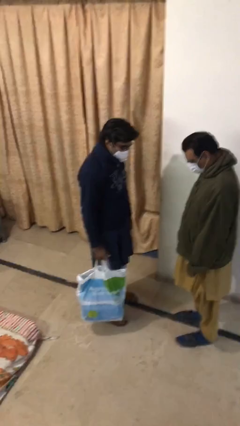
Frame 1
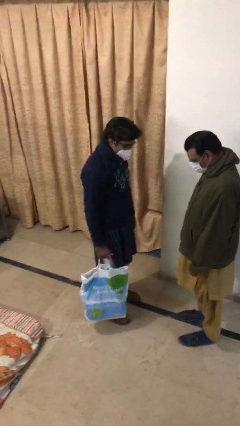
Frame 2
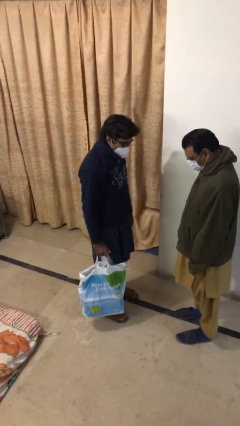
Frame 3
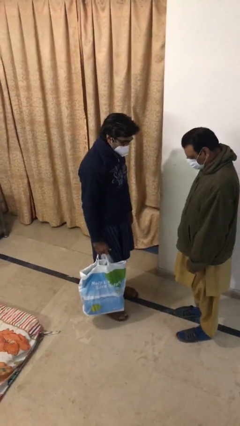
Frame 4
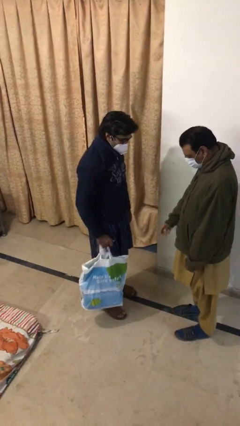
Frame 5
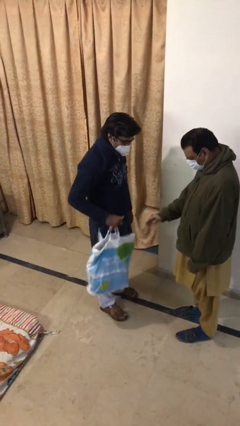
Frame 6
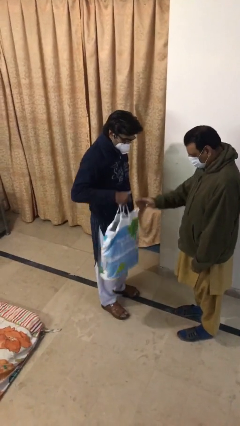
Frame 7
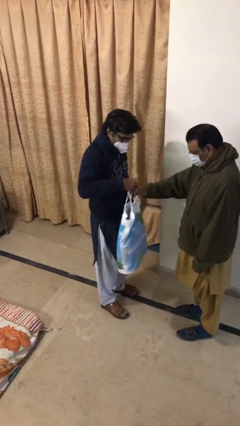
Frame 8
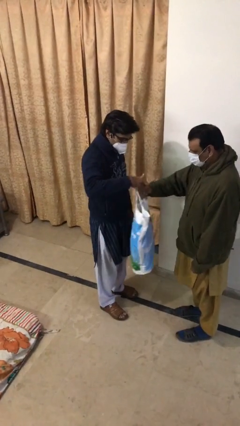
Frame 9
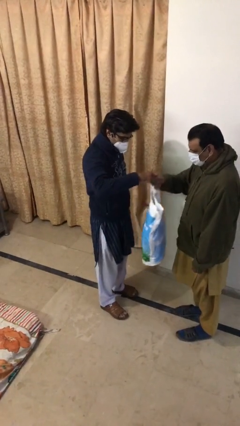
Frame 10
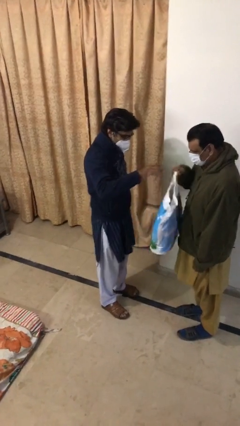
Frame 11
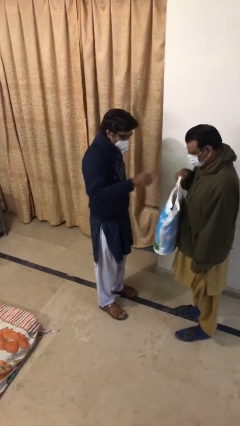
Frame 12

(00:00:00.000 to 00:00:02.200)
person transfers object to person

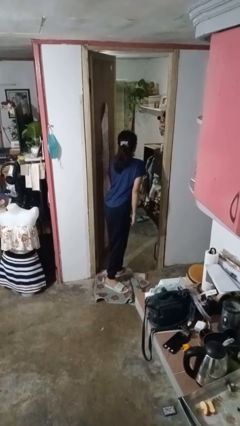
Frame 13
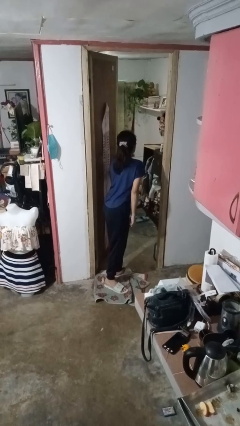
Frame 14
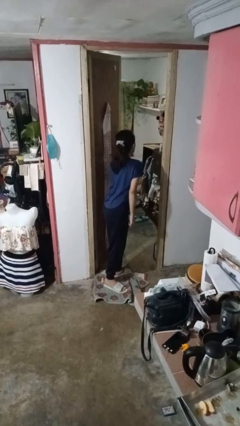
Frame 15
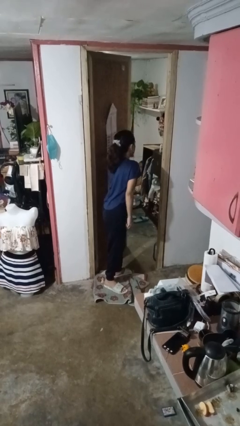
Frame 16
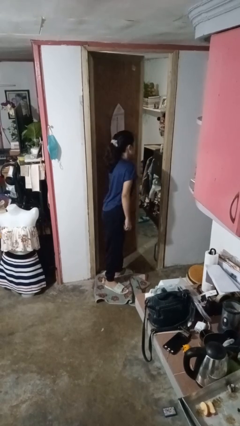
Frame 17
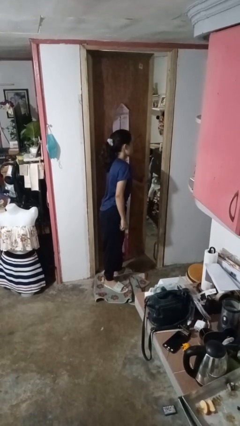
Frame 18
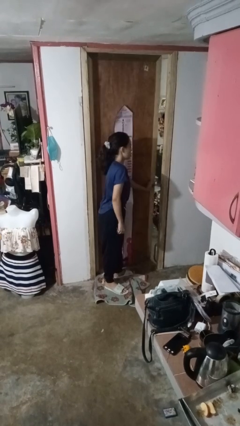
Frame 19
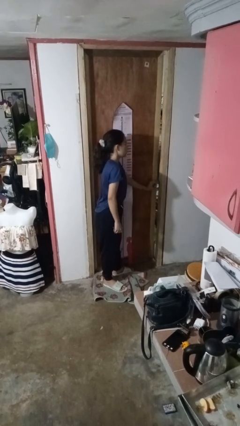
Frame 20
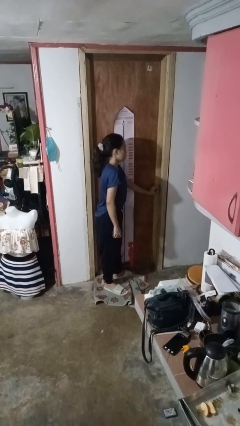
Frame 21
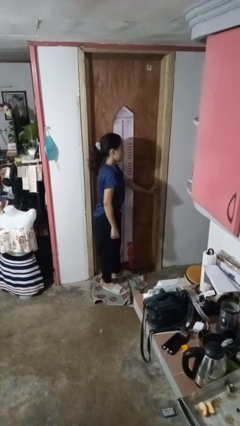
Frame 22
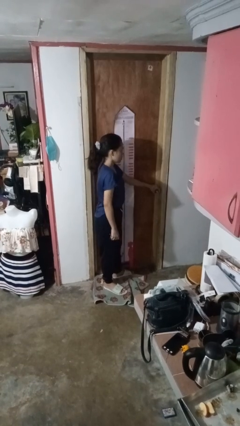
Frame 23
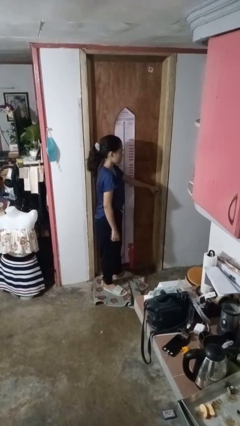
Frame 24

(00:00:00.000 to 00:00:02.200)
person closes facility door

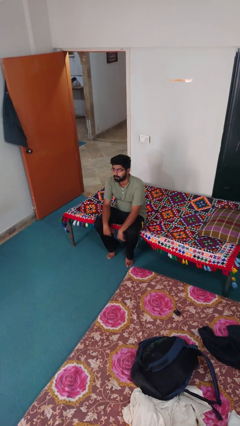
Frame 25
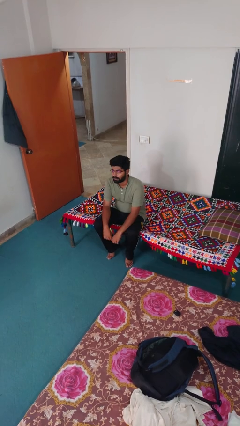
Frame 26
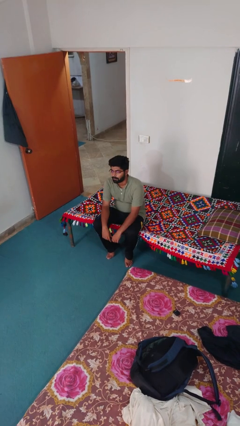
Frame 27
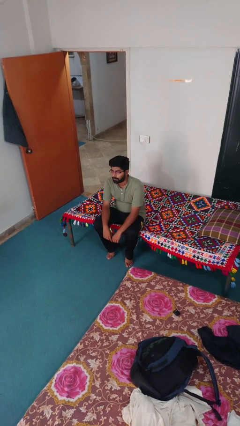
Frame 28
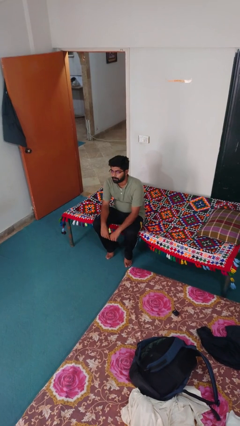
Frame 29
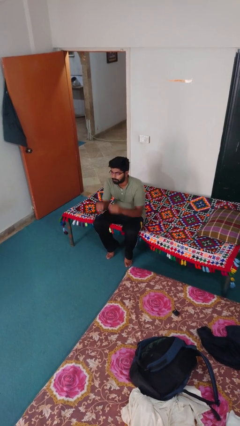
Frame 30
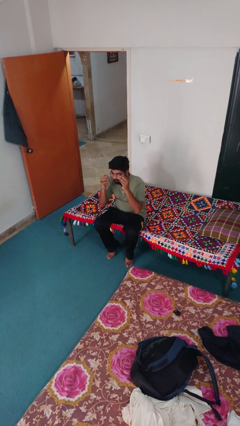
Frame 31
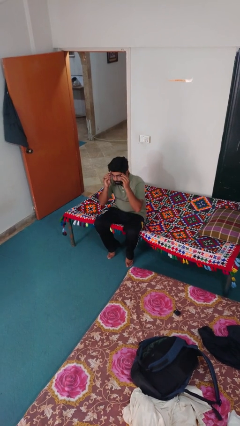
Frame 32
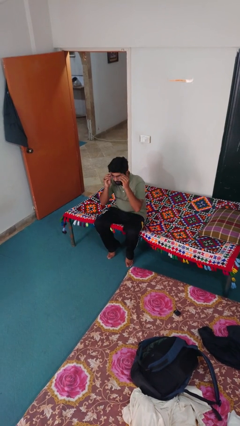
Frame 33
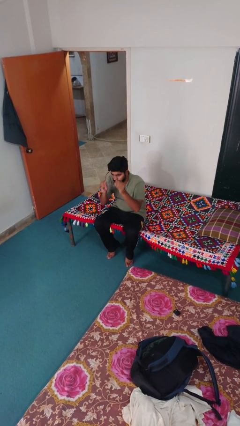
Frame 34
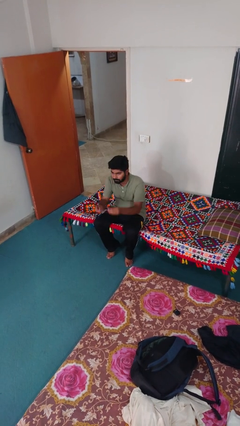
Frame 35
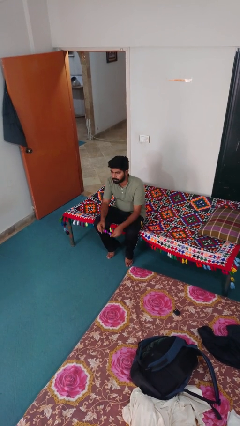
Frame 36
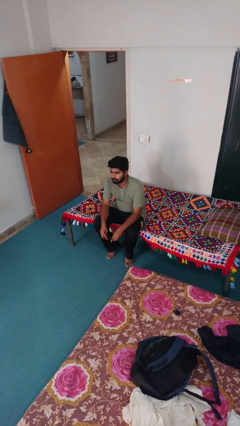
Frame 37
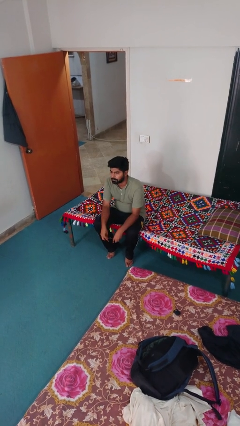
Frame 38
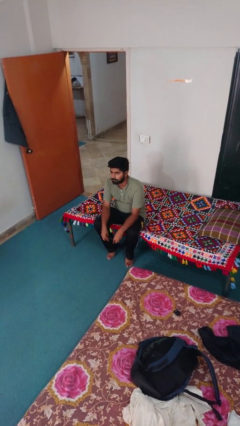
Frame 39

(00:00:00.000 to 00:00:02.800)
person takes off glasses

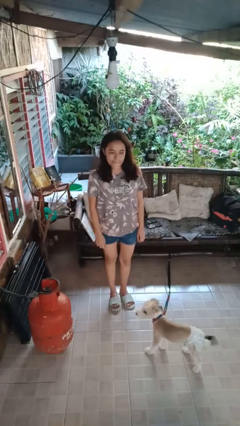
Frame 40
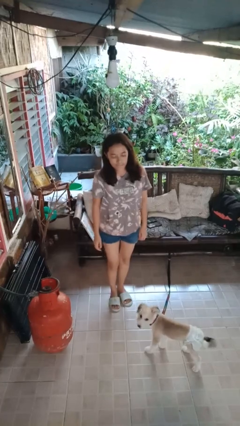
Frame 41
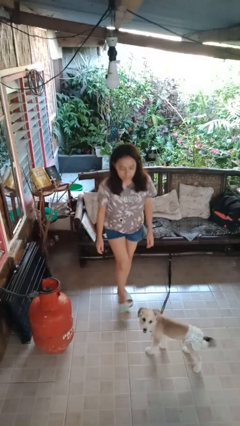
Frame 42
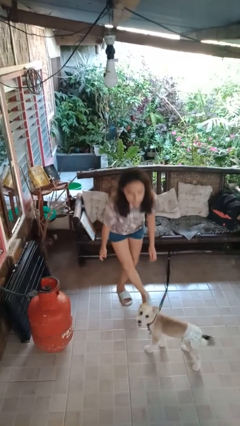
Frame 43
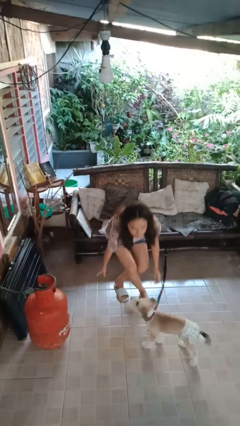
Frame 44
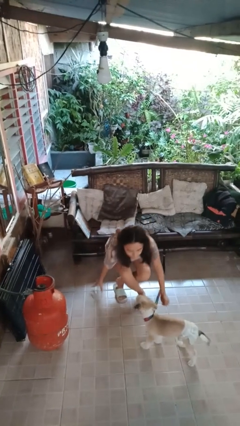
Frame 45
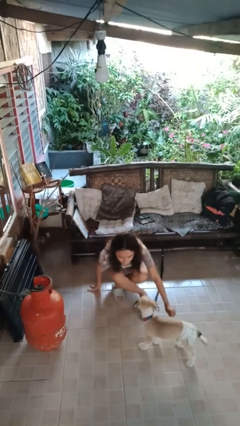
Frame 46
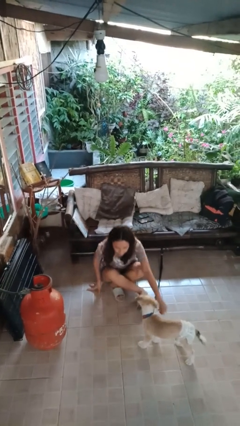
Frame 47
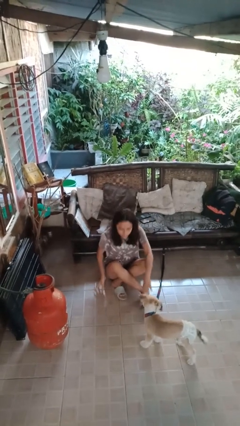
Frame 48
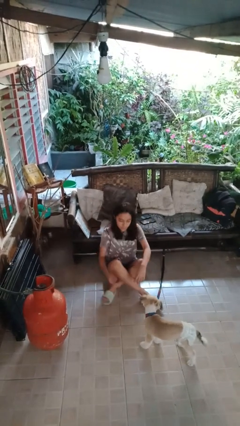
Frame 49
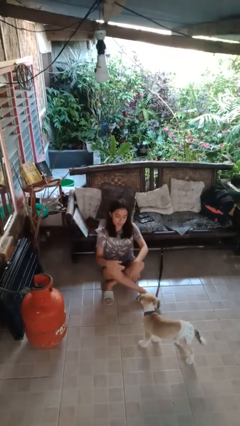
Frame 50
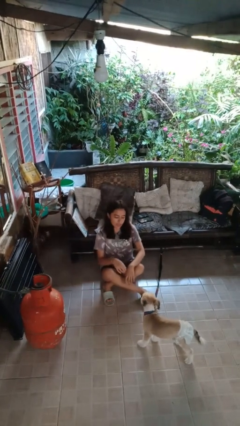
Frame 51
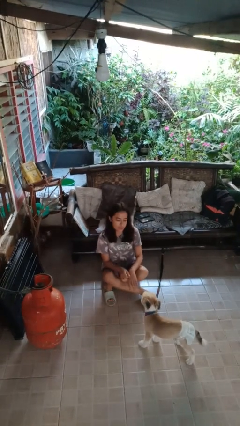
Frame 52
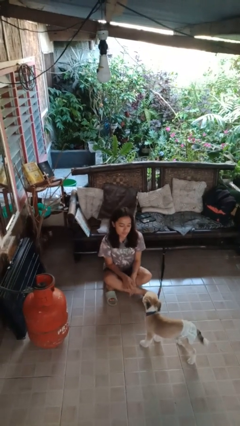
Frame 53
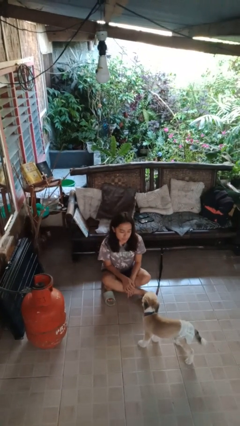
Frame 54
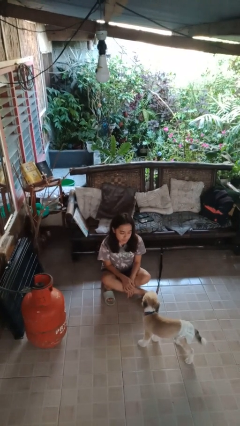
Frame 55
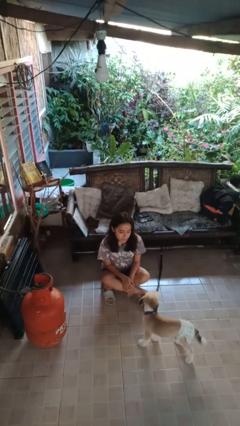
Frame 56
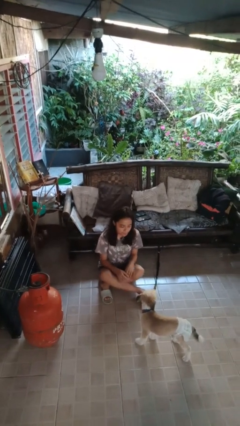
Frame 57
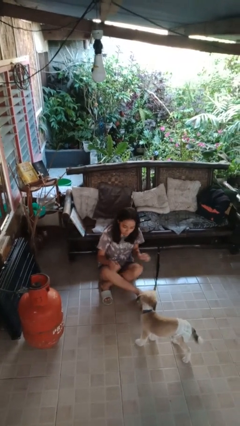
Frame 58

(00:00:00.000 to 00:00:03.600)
person sits crisscross

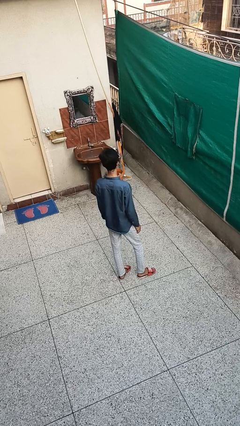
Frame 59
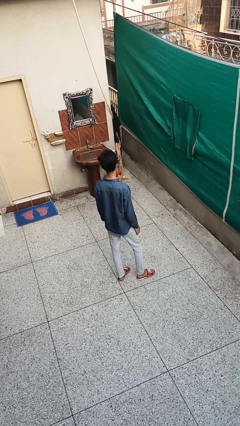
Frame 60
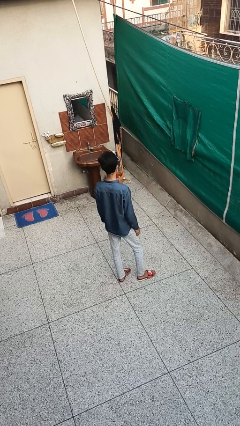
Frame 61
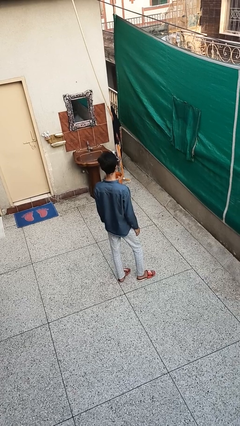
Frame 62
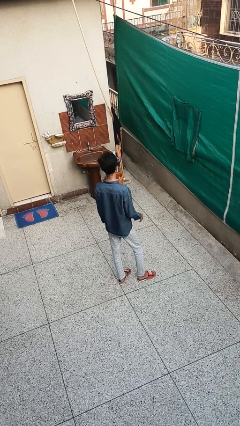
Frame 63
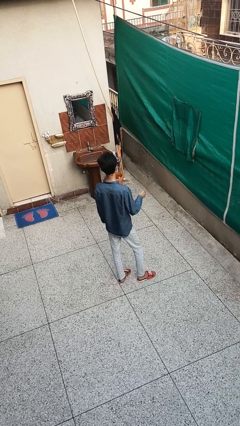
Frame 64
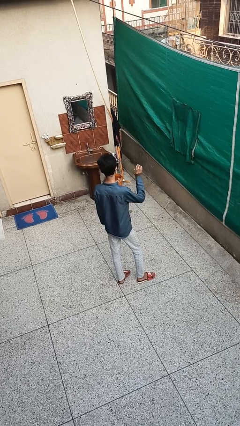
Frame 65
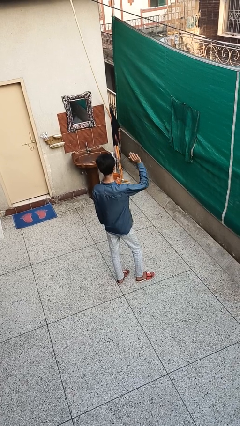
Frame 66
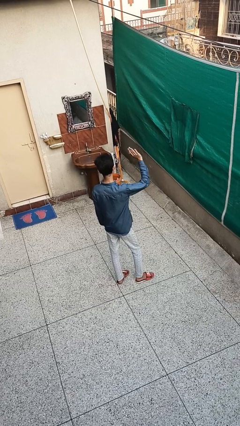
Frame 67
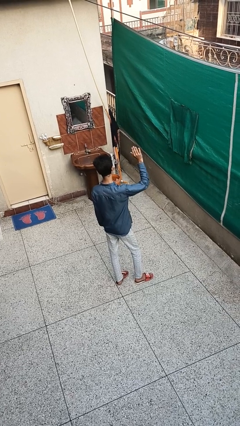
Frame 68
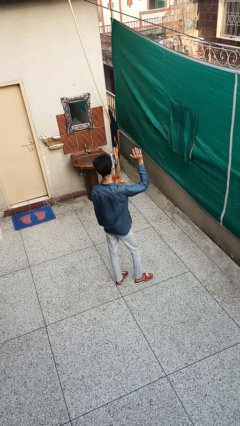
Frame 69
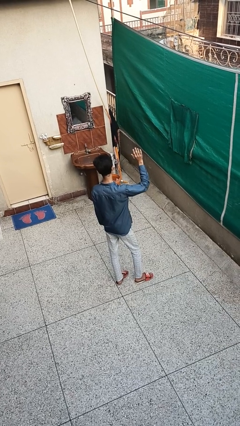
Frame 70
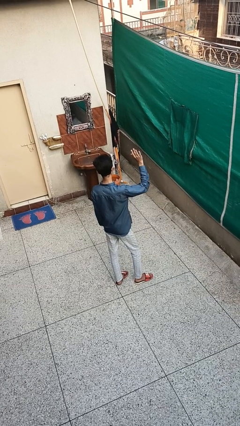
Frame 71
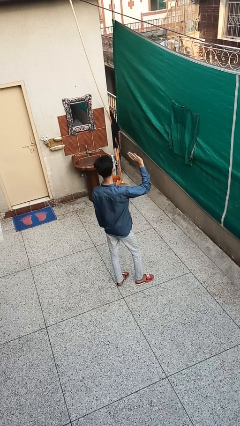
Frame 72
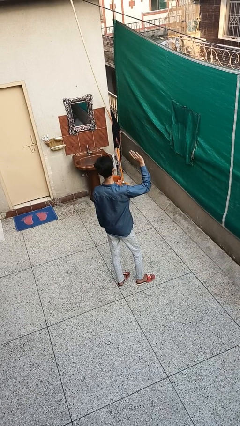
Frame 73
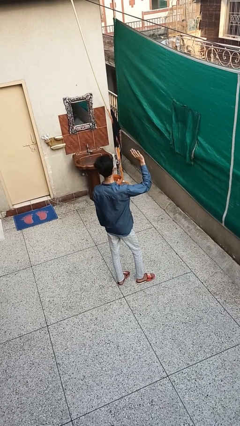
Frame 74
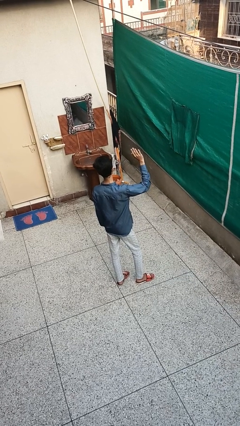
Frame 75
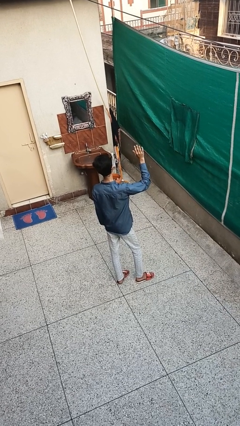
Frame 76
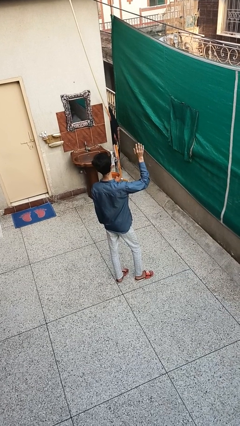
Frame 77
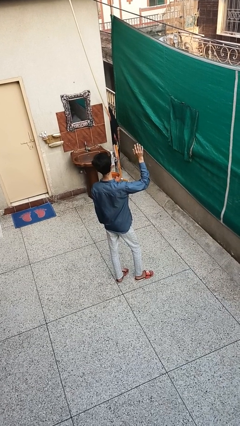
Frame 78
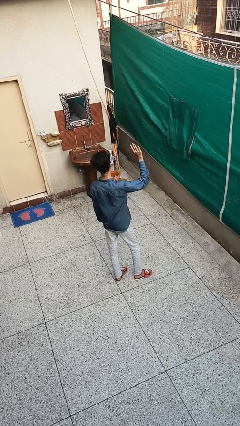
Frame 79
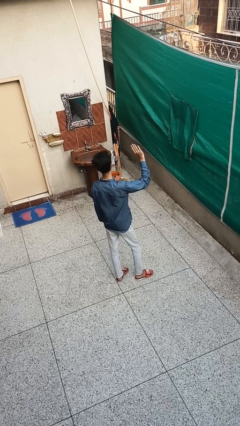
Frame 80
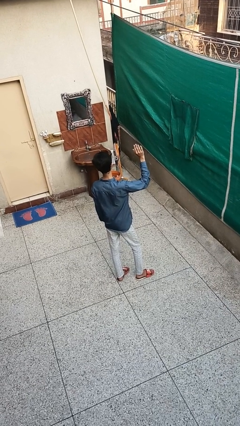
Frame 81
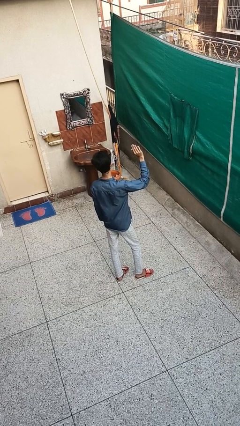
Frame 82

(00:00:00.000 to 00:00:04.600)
person waves at person

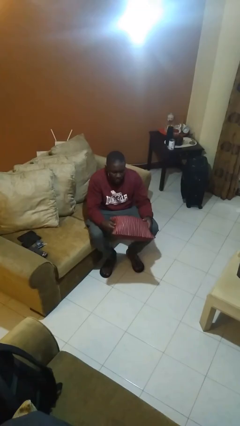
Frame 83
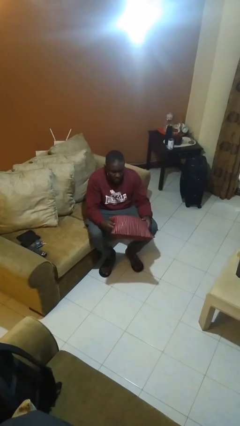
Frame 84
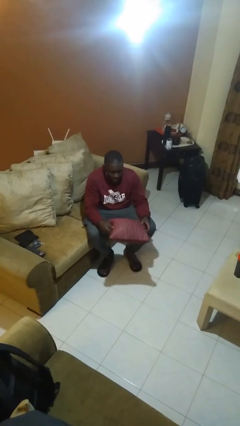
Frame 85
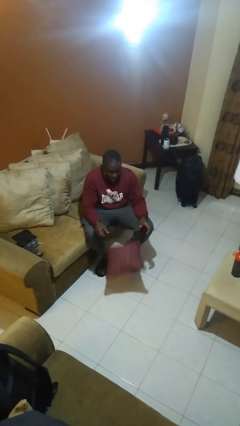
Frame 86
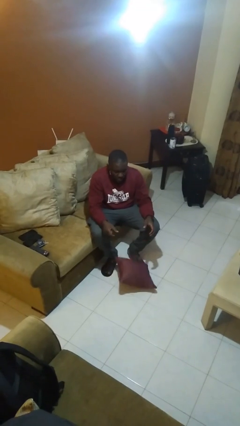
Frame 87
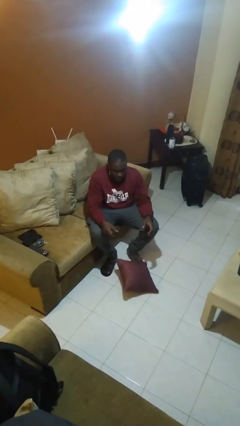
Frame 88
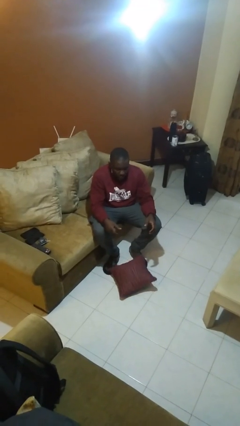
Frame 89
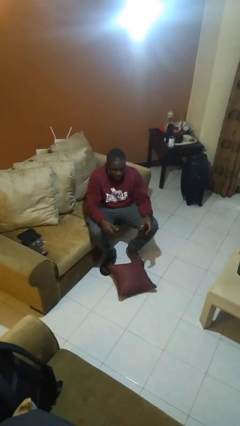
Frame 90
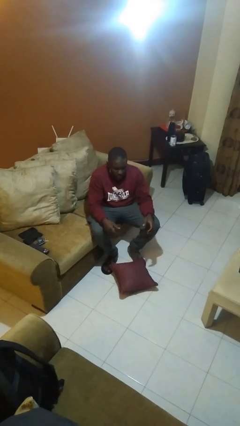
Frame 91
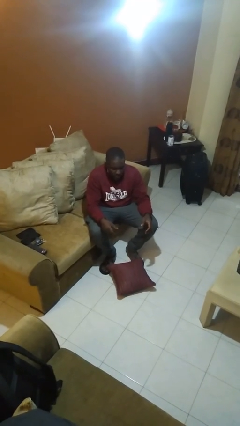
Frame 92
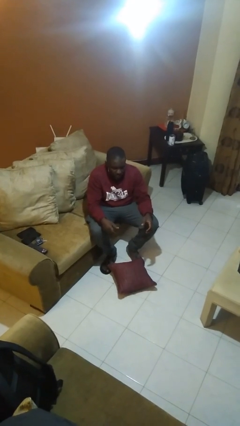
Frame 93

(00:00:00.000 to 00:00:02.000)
person drops object
